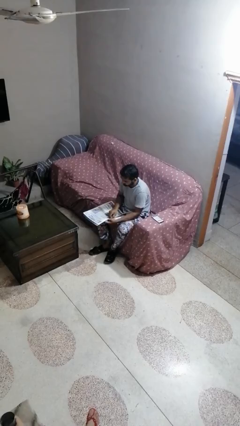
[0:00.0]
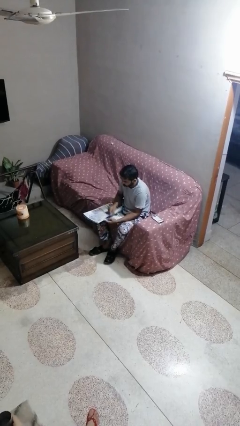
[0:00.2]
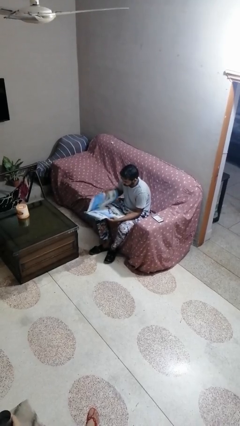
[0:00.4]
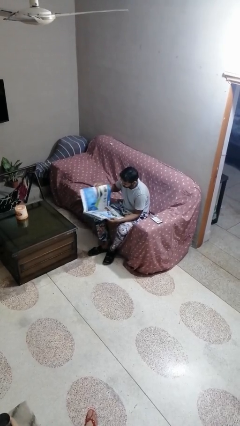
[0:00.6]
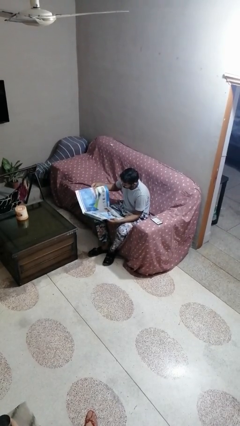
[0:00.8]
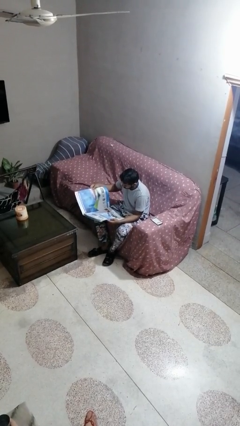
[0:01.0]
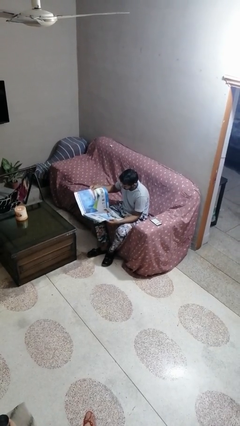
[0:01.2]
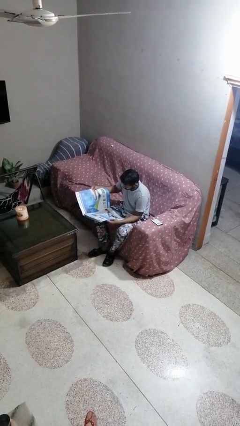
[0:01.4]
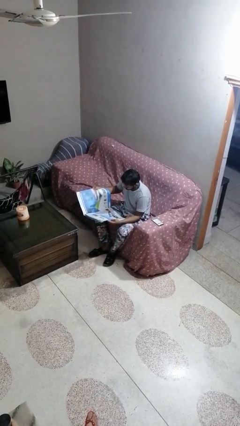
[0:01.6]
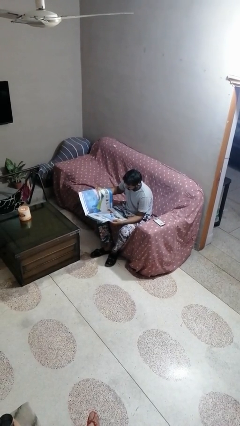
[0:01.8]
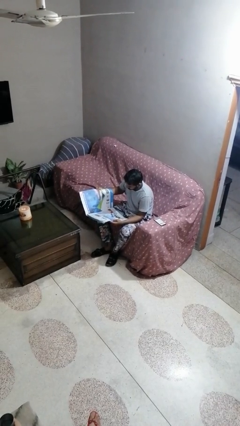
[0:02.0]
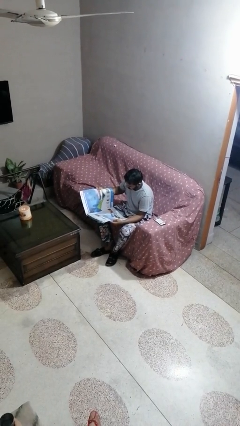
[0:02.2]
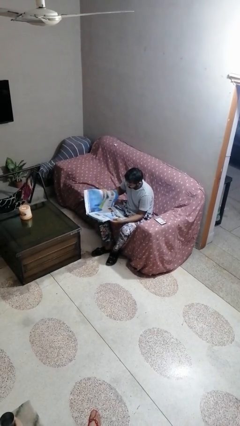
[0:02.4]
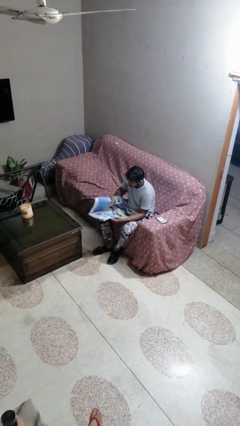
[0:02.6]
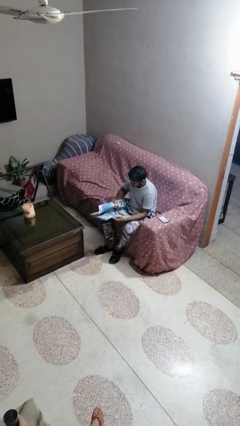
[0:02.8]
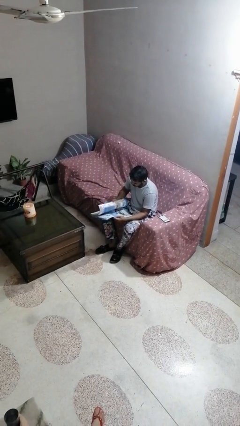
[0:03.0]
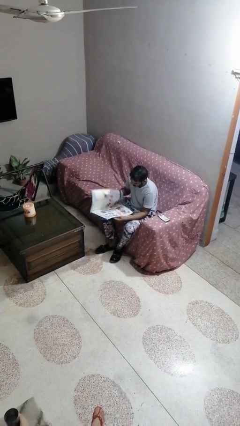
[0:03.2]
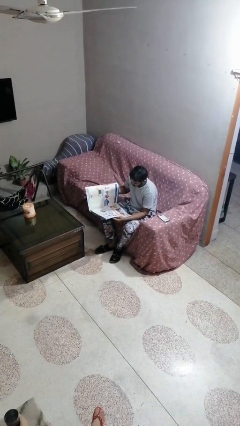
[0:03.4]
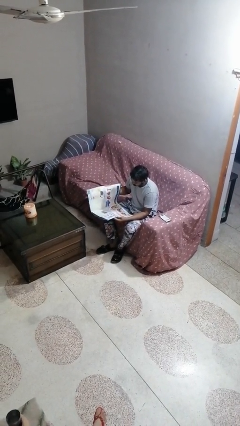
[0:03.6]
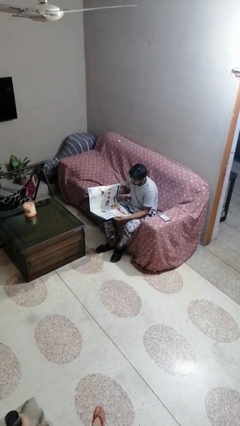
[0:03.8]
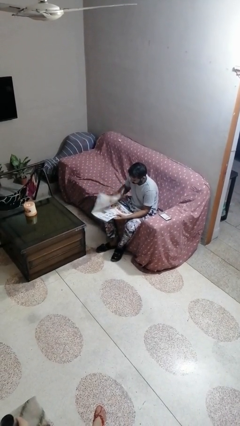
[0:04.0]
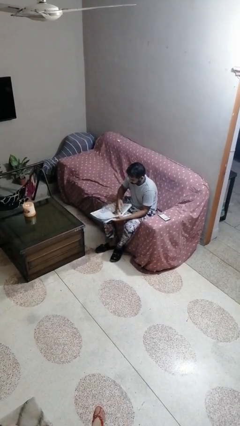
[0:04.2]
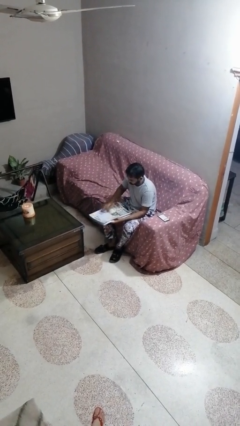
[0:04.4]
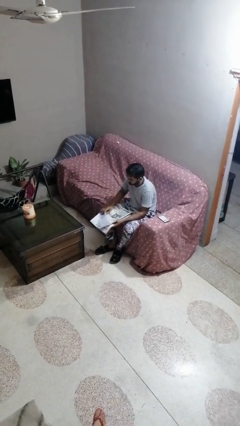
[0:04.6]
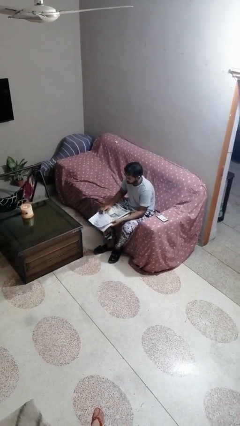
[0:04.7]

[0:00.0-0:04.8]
person reads magazine

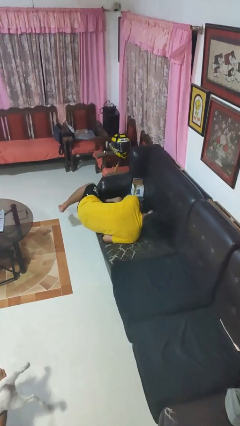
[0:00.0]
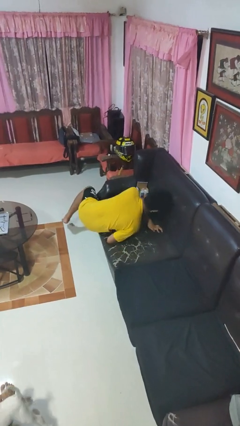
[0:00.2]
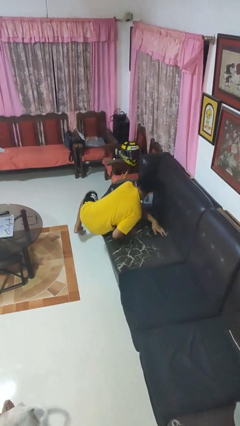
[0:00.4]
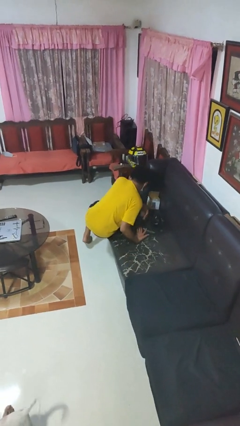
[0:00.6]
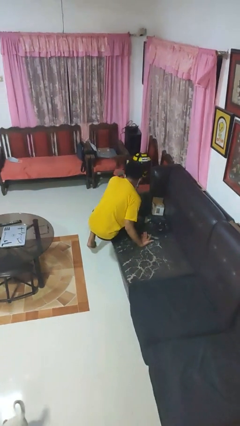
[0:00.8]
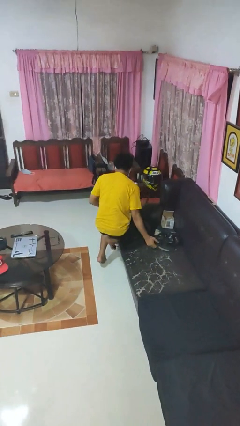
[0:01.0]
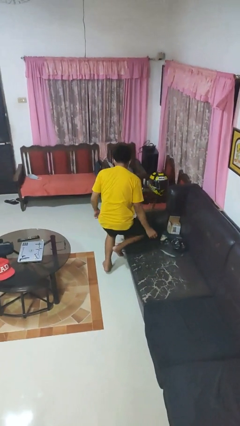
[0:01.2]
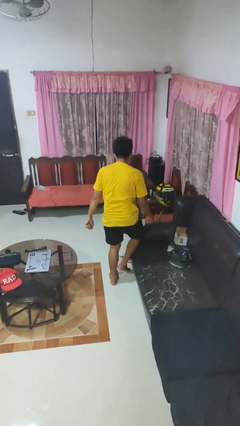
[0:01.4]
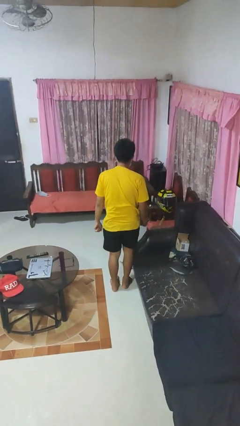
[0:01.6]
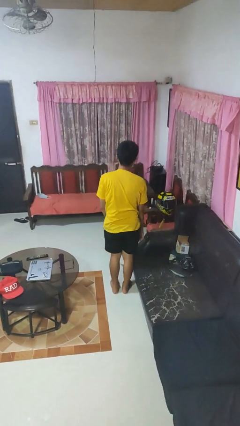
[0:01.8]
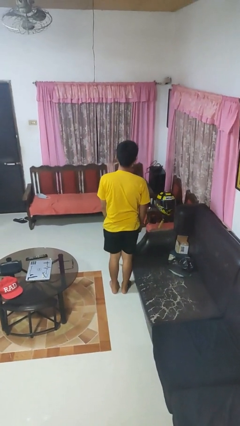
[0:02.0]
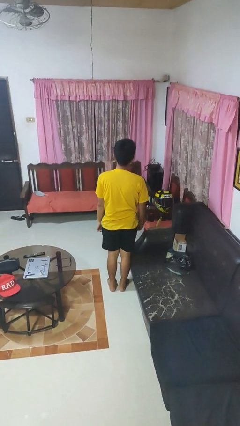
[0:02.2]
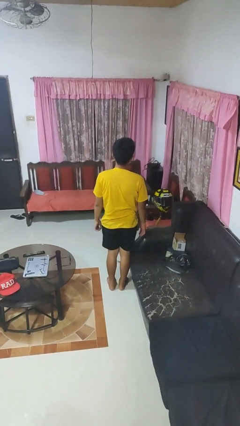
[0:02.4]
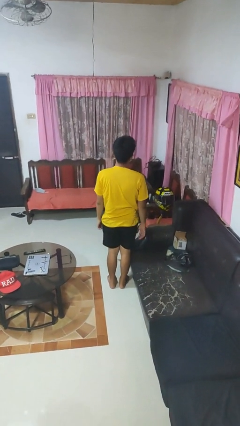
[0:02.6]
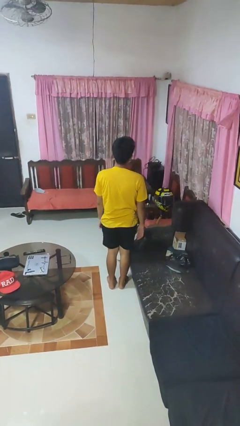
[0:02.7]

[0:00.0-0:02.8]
person stands up

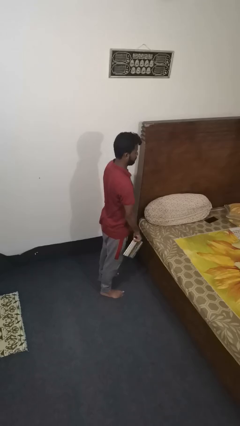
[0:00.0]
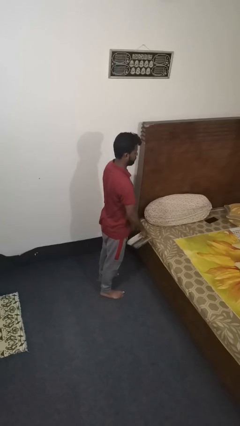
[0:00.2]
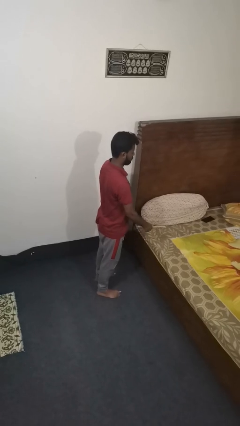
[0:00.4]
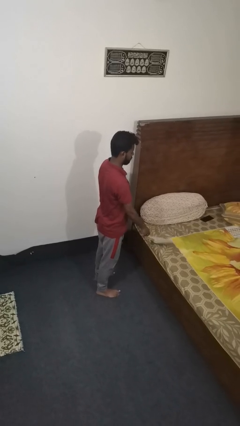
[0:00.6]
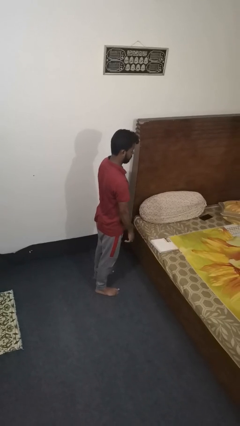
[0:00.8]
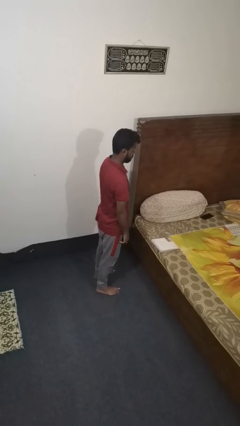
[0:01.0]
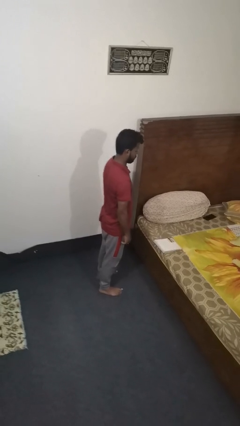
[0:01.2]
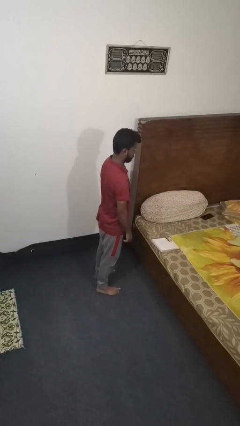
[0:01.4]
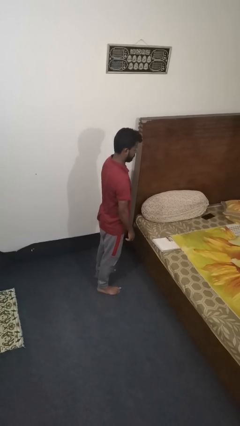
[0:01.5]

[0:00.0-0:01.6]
person throws object on bed

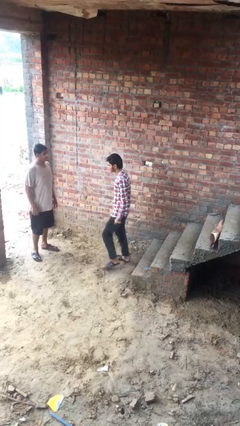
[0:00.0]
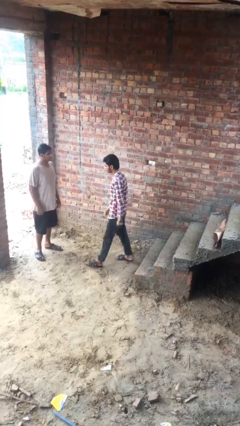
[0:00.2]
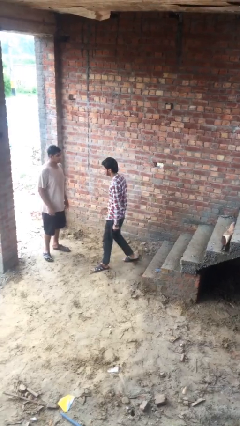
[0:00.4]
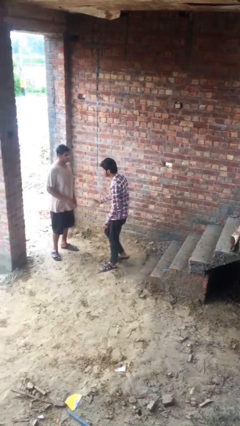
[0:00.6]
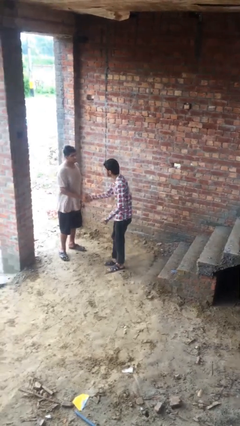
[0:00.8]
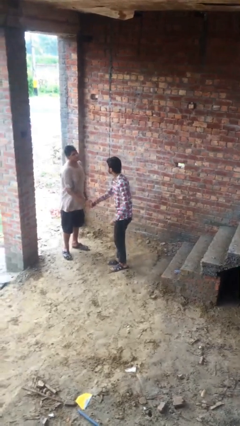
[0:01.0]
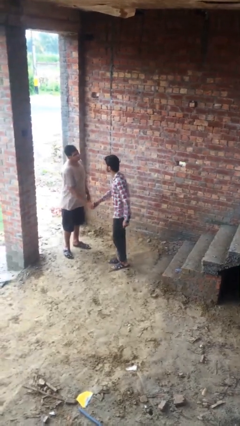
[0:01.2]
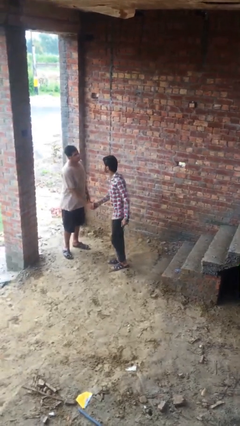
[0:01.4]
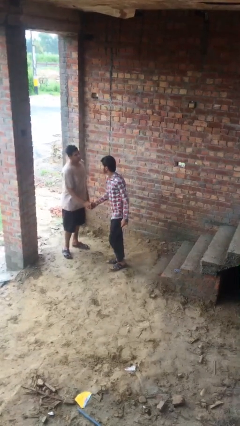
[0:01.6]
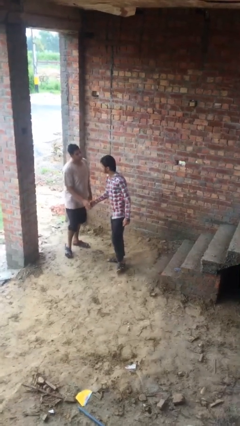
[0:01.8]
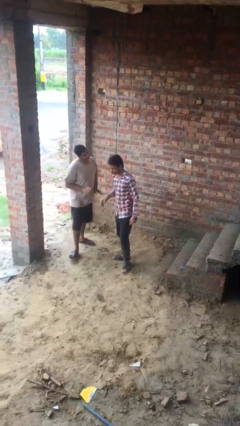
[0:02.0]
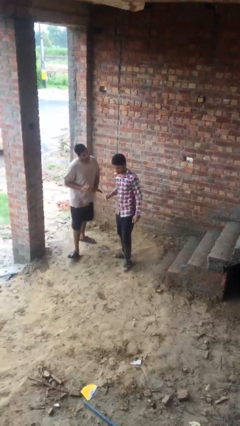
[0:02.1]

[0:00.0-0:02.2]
person shakes hand

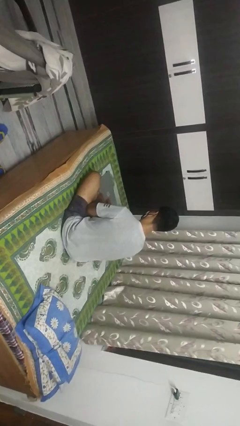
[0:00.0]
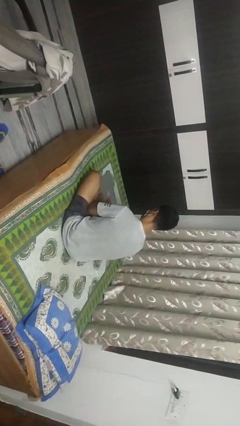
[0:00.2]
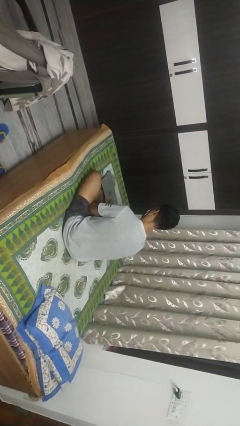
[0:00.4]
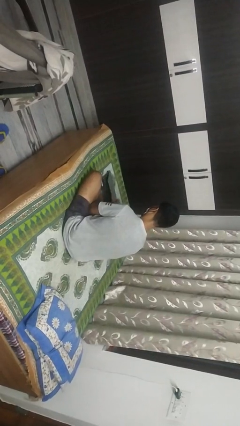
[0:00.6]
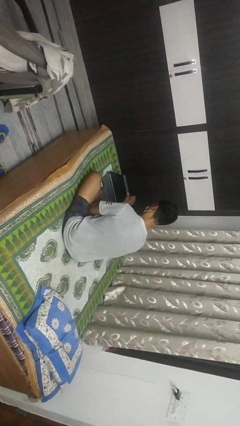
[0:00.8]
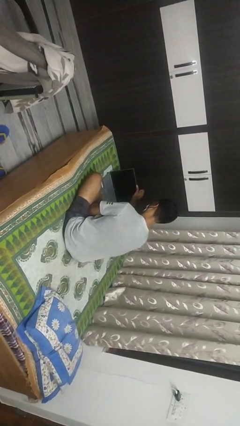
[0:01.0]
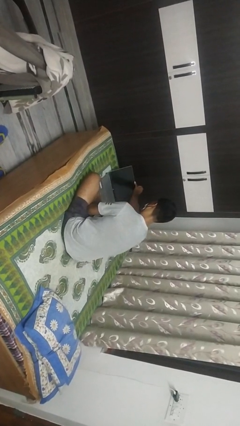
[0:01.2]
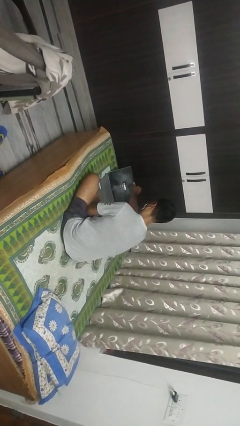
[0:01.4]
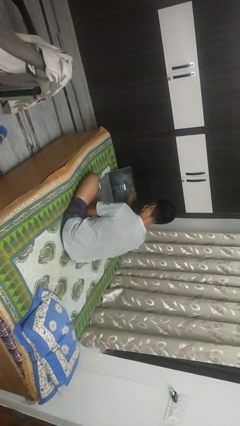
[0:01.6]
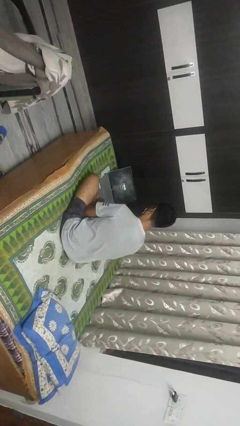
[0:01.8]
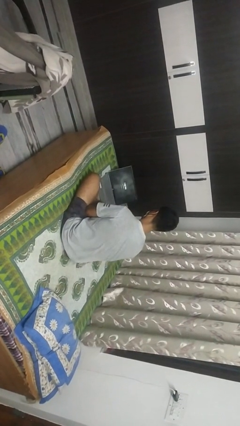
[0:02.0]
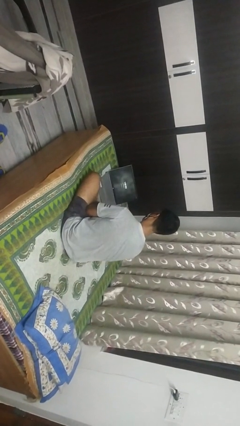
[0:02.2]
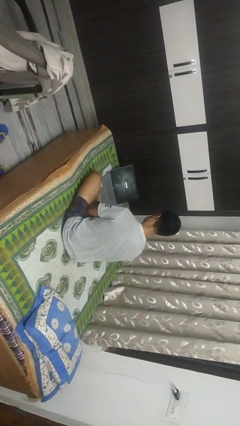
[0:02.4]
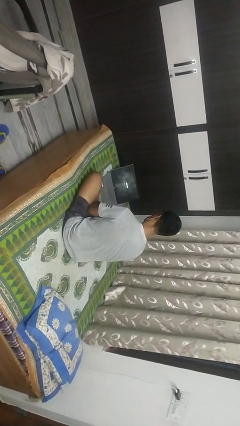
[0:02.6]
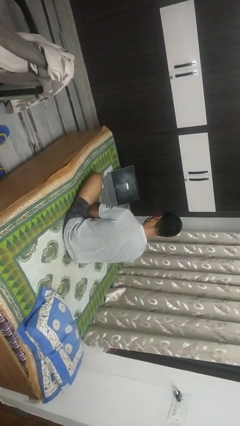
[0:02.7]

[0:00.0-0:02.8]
person opens laptop

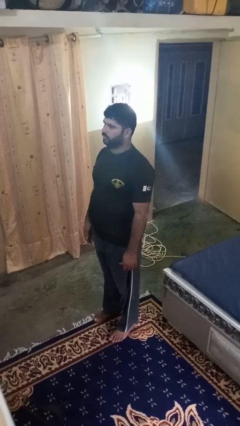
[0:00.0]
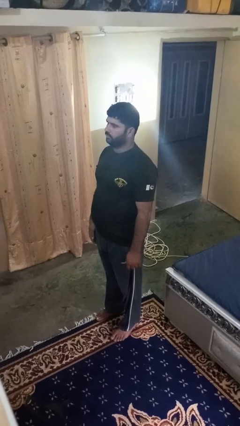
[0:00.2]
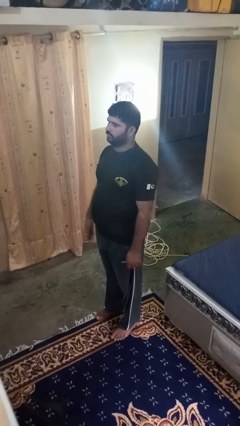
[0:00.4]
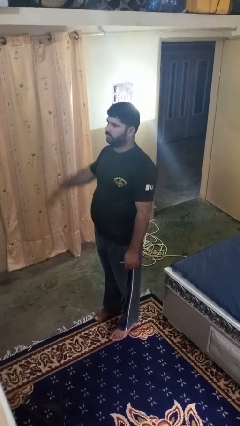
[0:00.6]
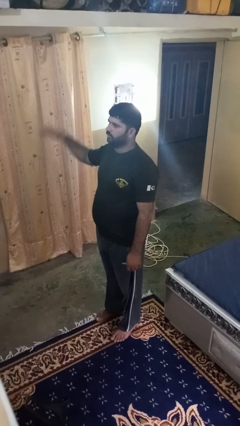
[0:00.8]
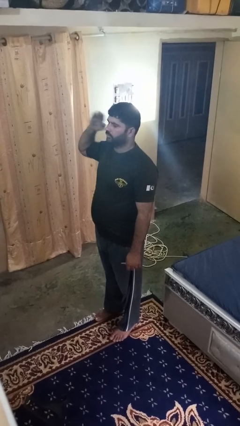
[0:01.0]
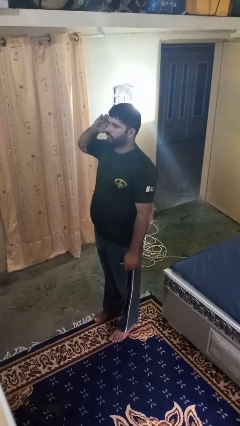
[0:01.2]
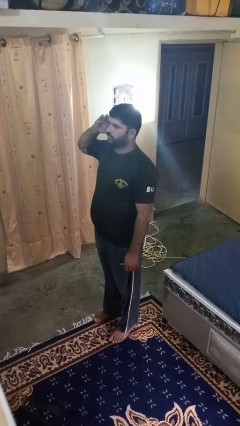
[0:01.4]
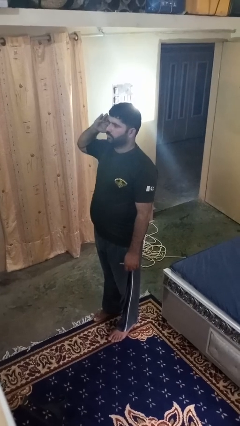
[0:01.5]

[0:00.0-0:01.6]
person salutes

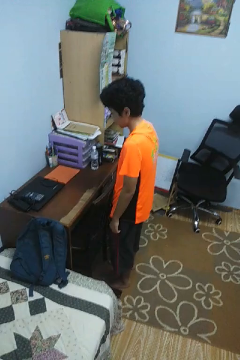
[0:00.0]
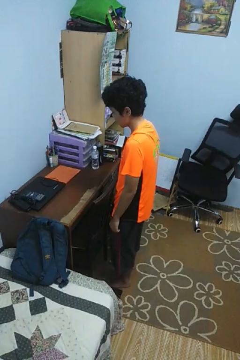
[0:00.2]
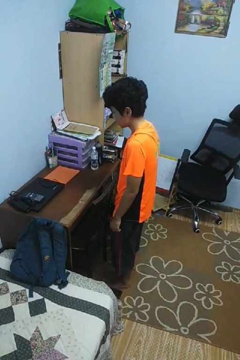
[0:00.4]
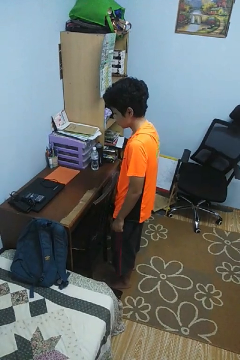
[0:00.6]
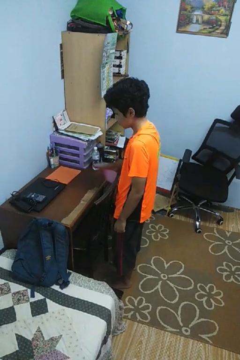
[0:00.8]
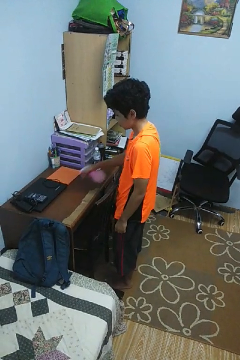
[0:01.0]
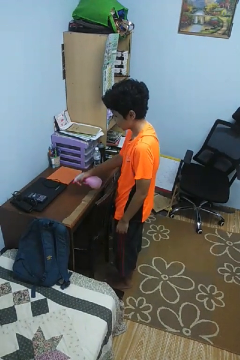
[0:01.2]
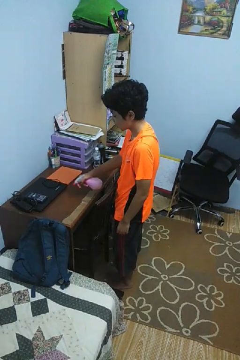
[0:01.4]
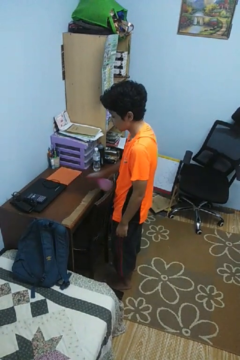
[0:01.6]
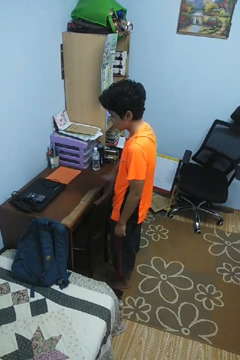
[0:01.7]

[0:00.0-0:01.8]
person sprays from bottle
